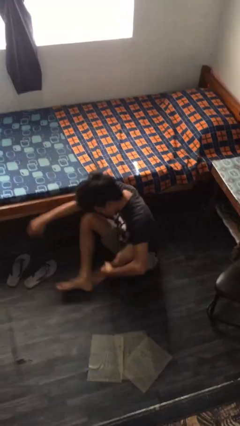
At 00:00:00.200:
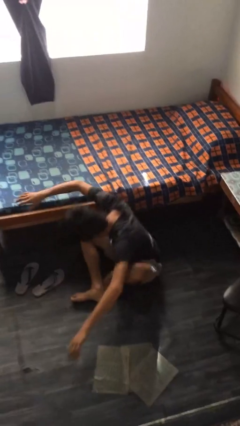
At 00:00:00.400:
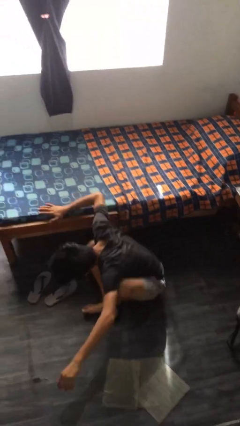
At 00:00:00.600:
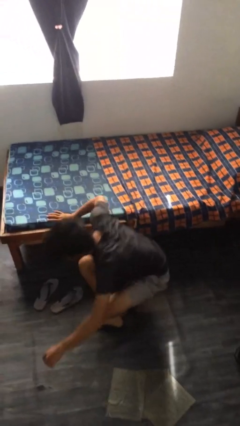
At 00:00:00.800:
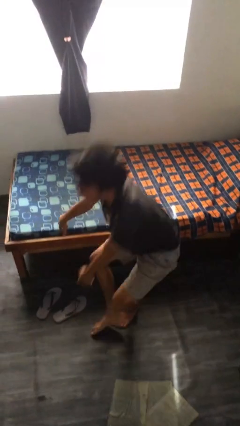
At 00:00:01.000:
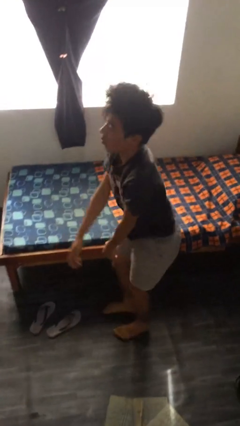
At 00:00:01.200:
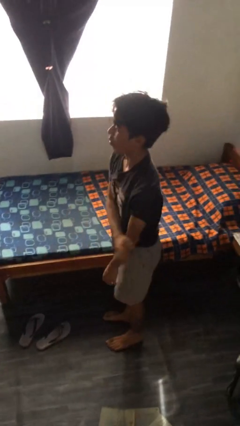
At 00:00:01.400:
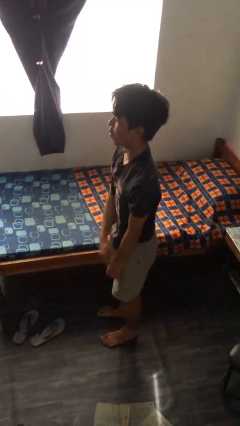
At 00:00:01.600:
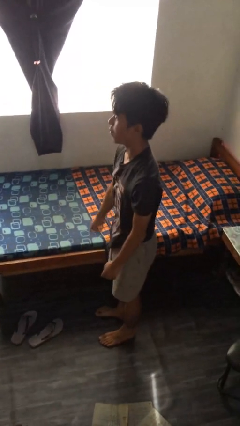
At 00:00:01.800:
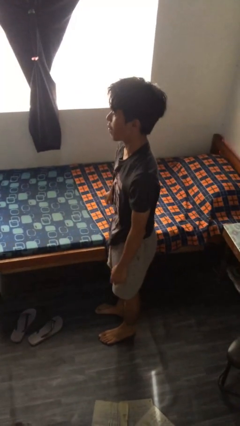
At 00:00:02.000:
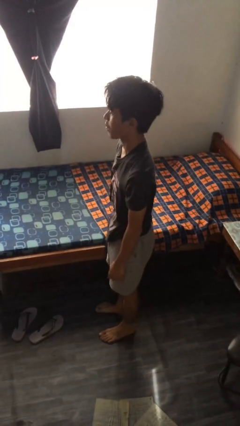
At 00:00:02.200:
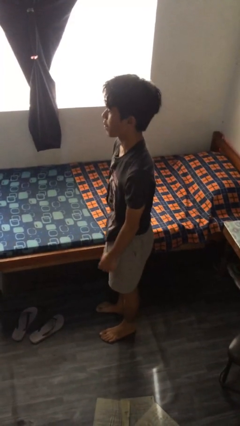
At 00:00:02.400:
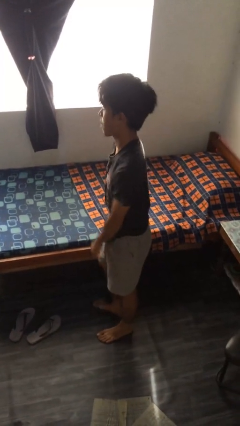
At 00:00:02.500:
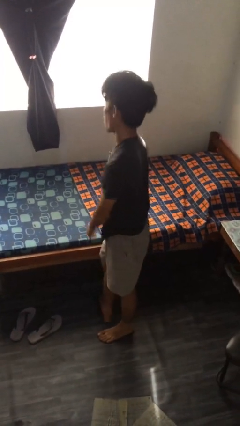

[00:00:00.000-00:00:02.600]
person stands up from floor

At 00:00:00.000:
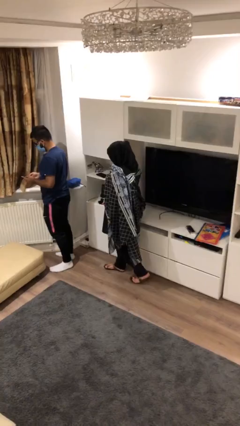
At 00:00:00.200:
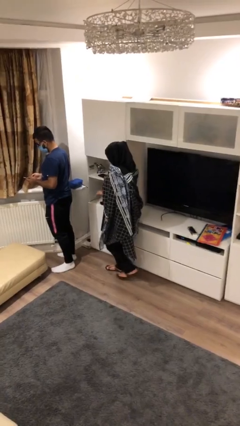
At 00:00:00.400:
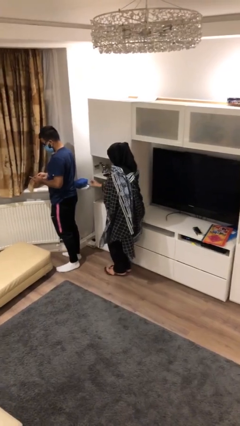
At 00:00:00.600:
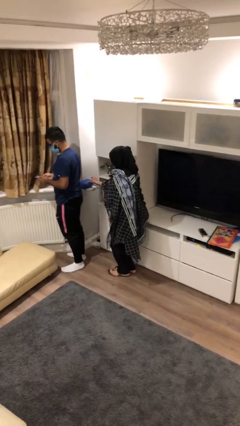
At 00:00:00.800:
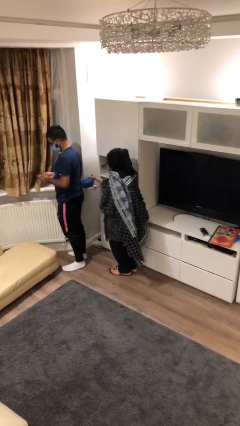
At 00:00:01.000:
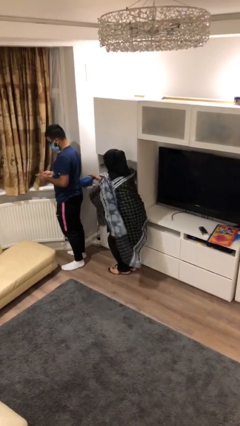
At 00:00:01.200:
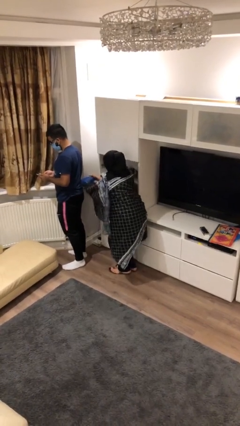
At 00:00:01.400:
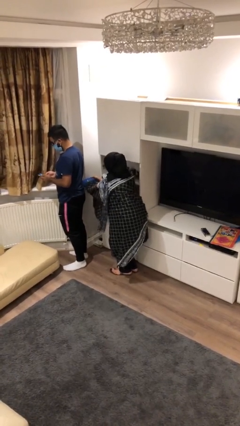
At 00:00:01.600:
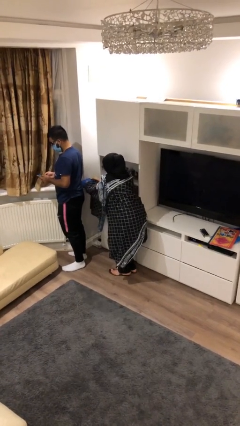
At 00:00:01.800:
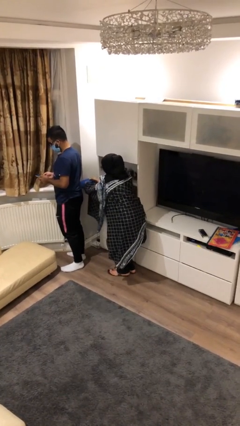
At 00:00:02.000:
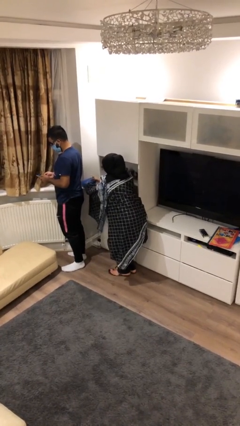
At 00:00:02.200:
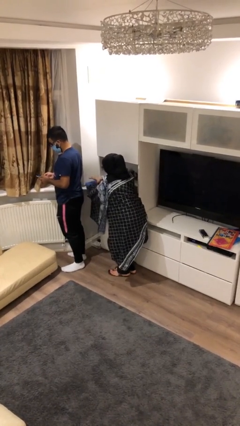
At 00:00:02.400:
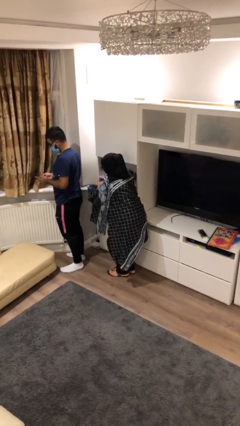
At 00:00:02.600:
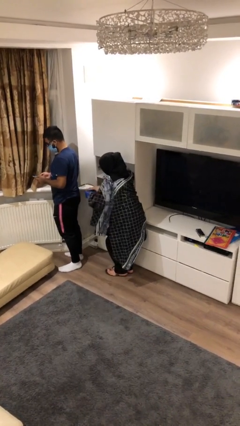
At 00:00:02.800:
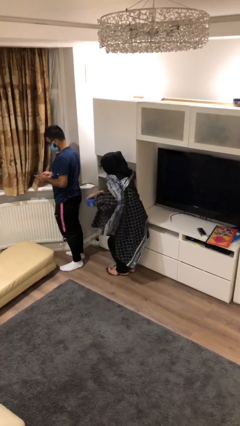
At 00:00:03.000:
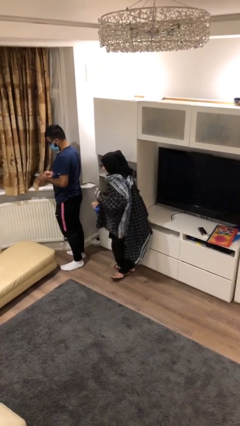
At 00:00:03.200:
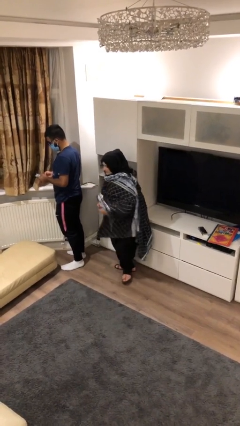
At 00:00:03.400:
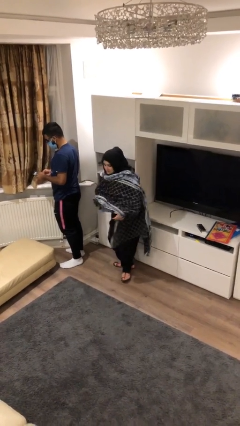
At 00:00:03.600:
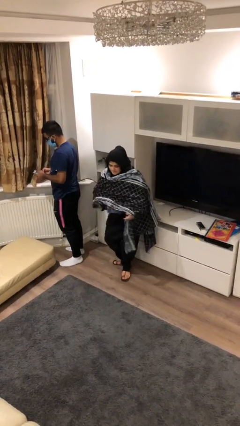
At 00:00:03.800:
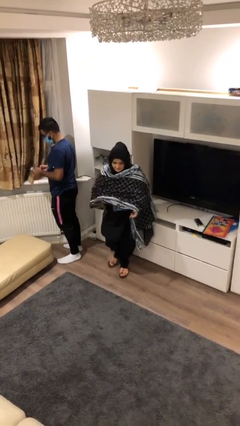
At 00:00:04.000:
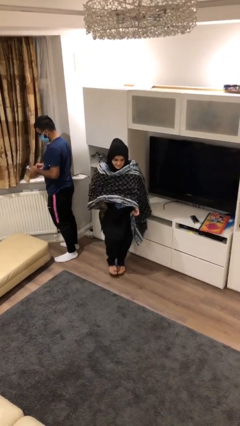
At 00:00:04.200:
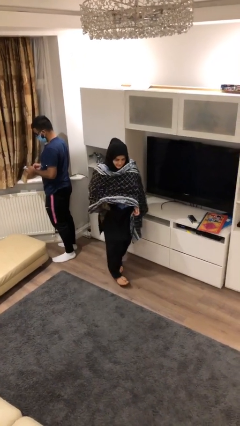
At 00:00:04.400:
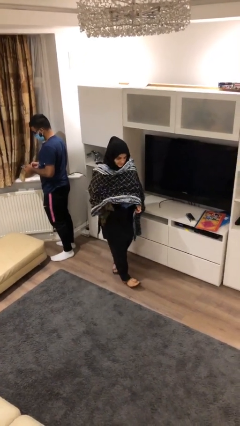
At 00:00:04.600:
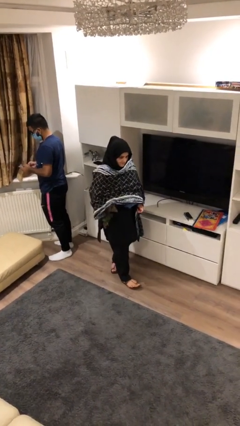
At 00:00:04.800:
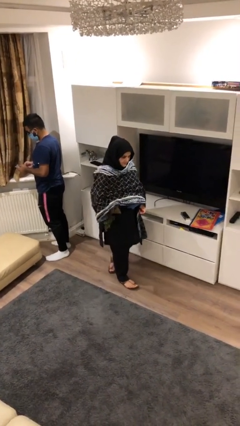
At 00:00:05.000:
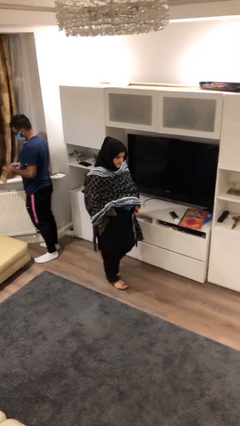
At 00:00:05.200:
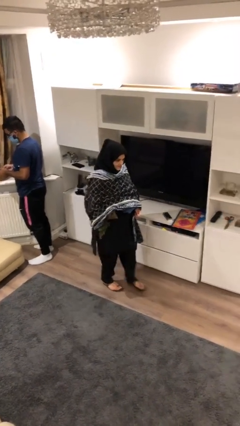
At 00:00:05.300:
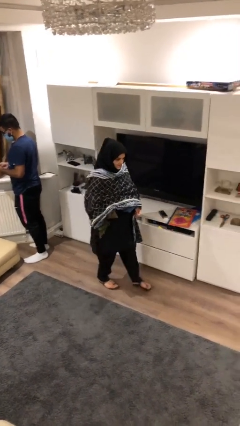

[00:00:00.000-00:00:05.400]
person steals object from person

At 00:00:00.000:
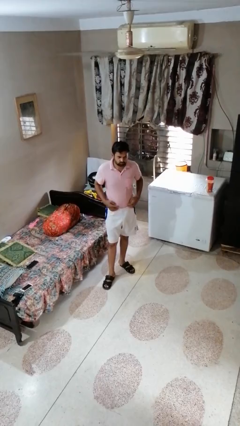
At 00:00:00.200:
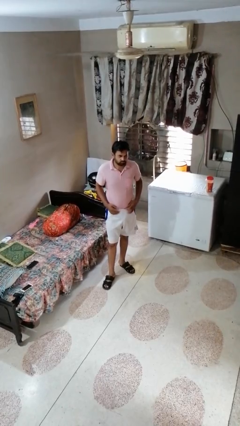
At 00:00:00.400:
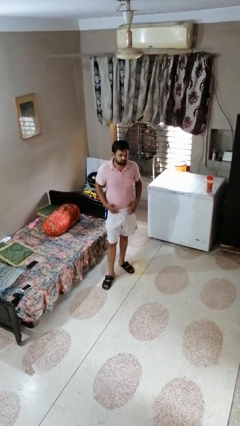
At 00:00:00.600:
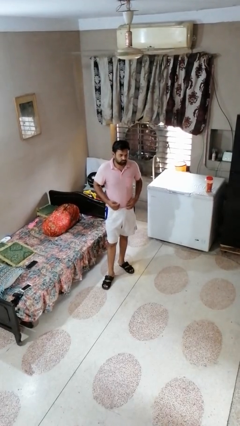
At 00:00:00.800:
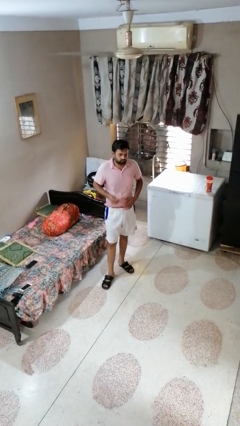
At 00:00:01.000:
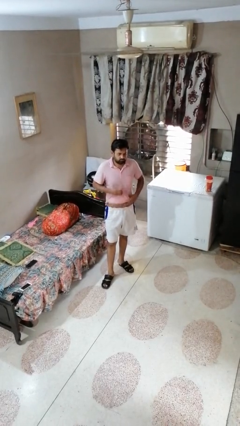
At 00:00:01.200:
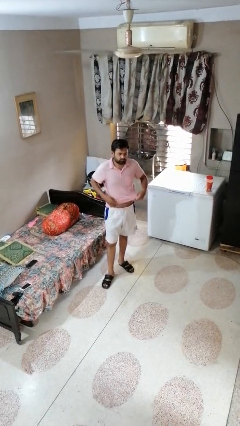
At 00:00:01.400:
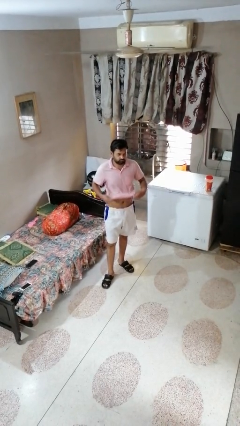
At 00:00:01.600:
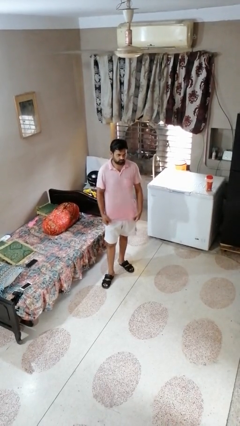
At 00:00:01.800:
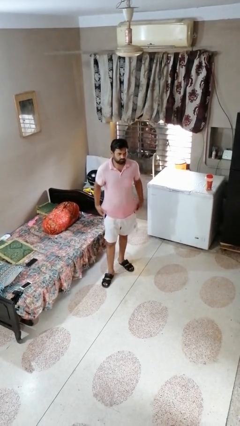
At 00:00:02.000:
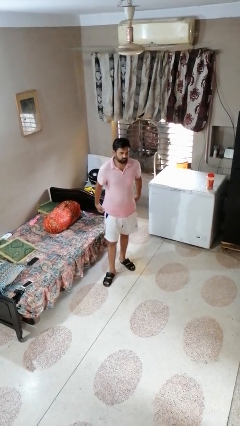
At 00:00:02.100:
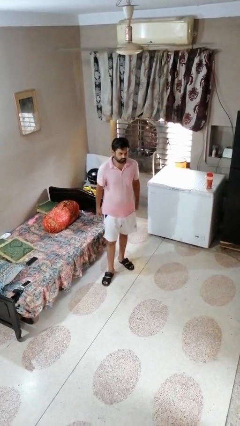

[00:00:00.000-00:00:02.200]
person untucks shirt

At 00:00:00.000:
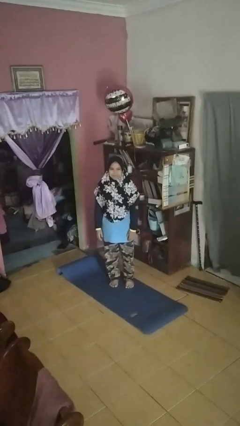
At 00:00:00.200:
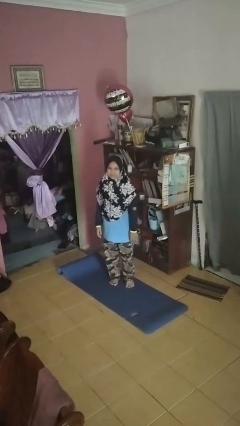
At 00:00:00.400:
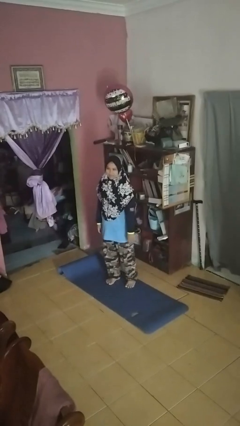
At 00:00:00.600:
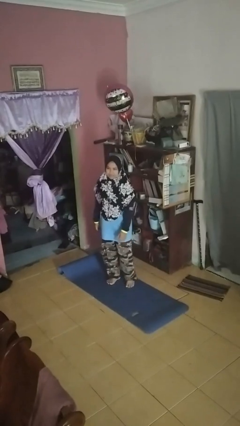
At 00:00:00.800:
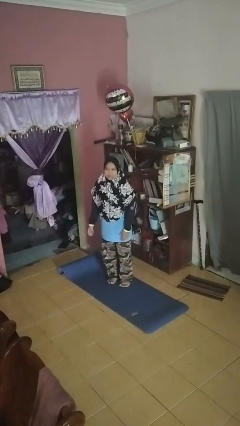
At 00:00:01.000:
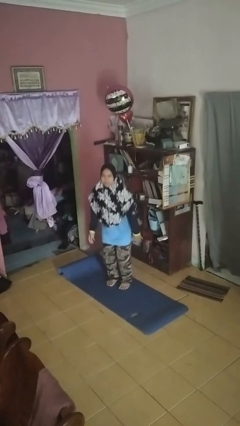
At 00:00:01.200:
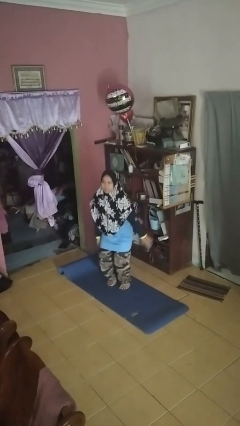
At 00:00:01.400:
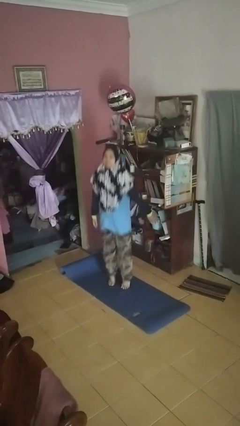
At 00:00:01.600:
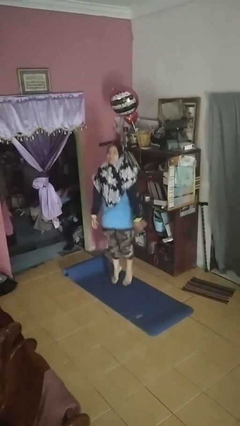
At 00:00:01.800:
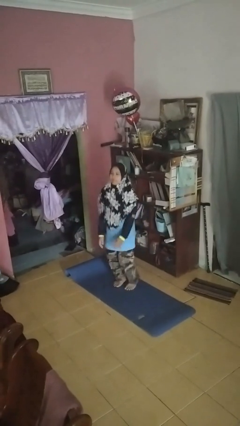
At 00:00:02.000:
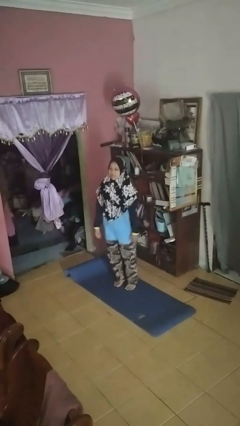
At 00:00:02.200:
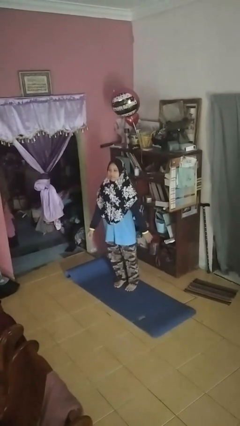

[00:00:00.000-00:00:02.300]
person jumps

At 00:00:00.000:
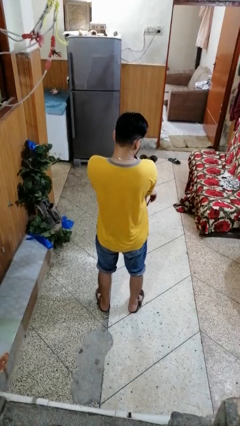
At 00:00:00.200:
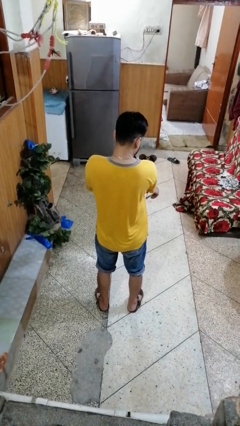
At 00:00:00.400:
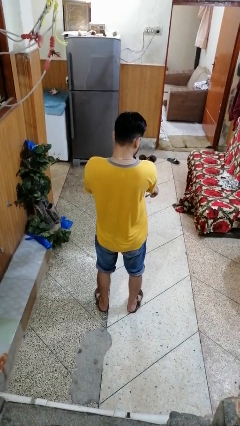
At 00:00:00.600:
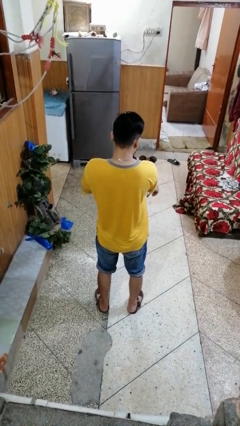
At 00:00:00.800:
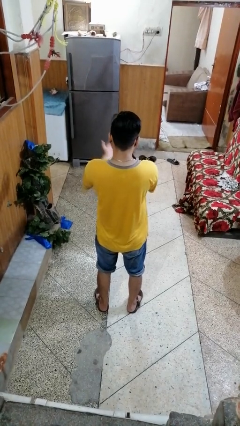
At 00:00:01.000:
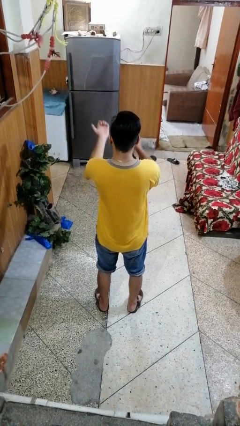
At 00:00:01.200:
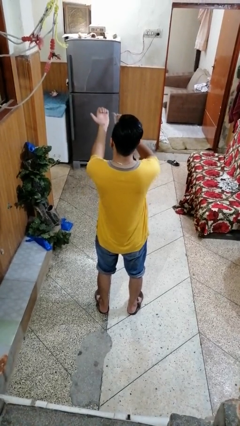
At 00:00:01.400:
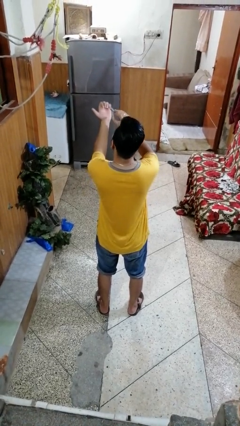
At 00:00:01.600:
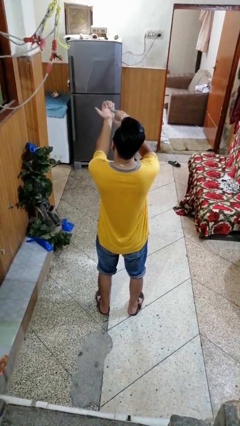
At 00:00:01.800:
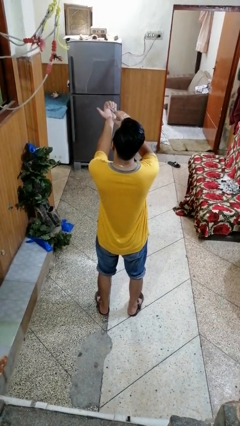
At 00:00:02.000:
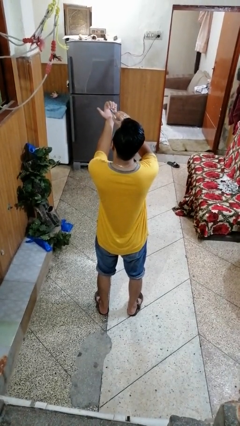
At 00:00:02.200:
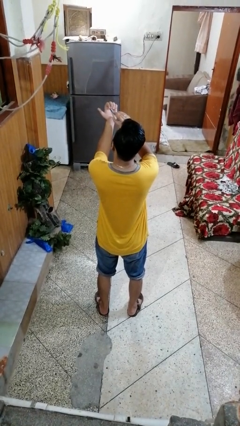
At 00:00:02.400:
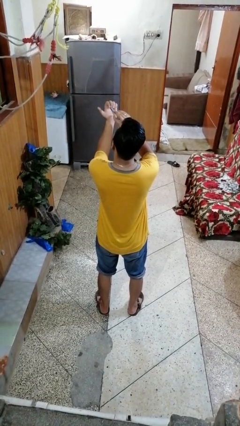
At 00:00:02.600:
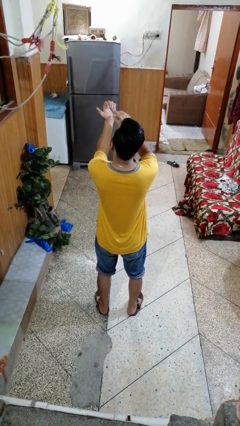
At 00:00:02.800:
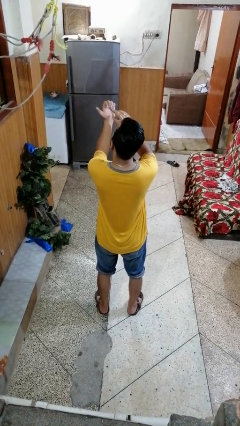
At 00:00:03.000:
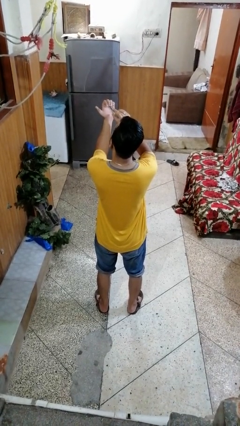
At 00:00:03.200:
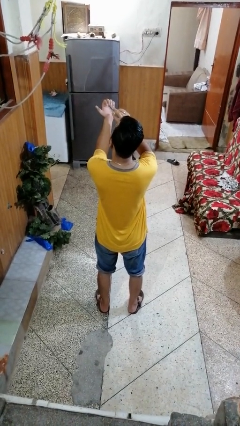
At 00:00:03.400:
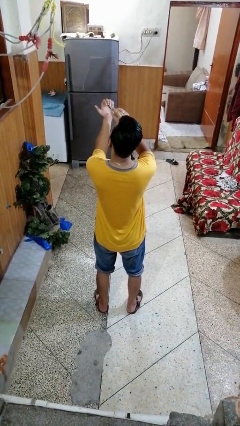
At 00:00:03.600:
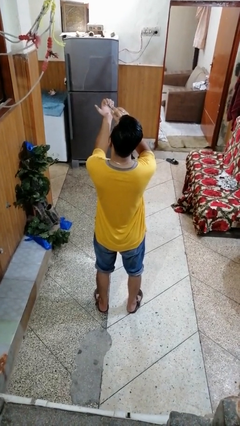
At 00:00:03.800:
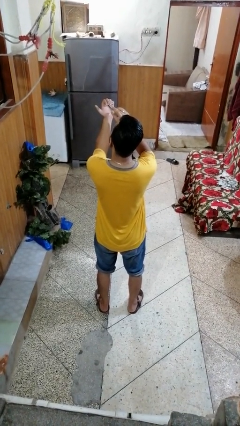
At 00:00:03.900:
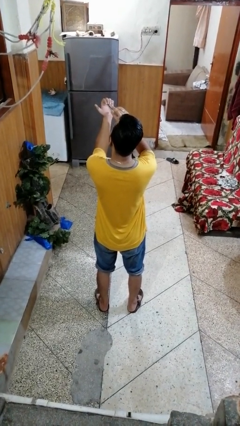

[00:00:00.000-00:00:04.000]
person clips fingernails

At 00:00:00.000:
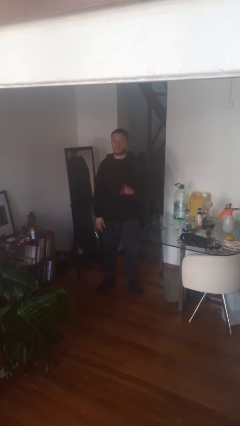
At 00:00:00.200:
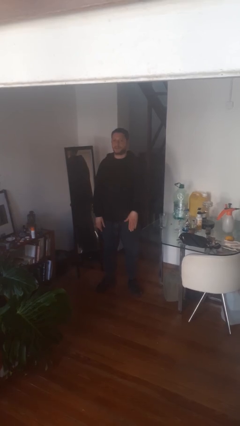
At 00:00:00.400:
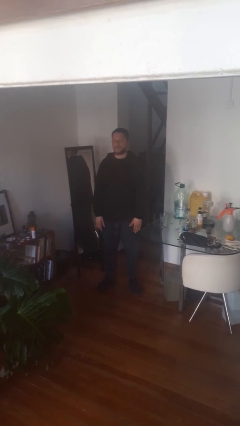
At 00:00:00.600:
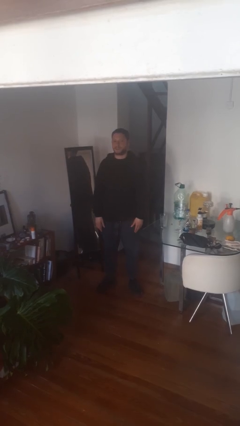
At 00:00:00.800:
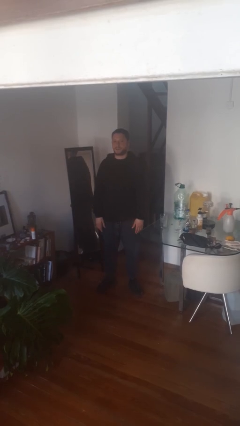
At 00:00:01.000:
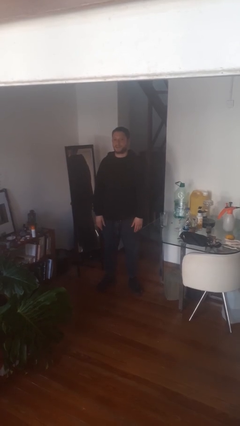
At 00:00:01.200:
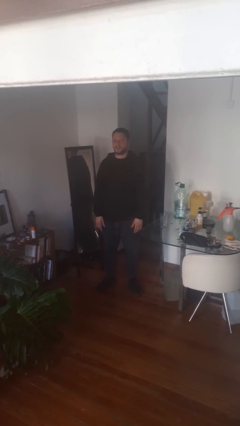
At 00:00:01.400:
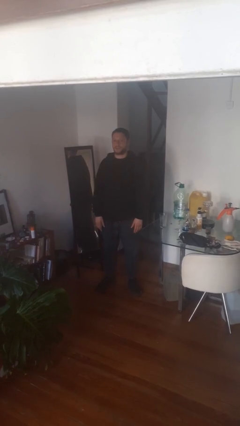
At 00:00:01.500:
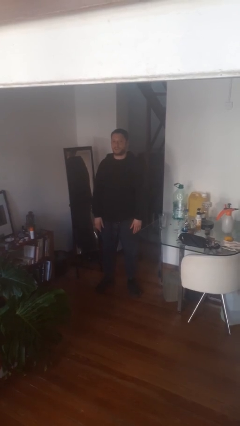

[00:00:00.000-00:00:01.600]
person gestures lower hand
